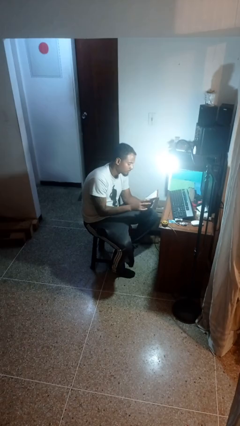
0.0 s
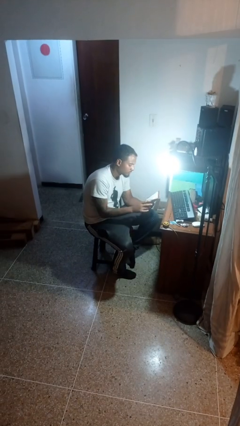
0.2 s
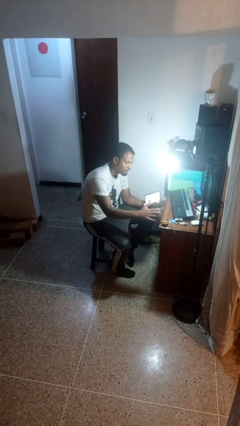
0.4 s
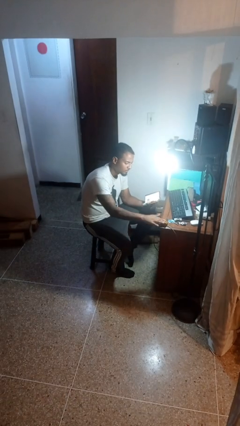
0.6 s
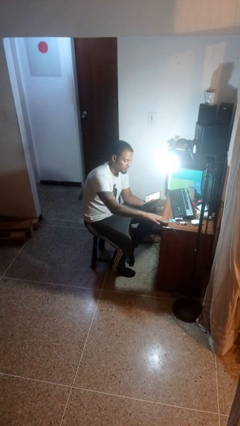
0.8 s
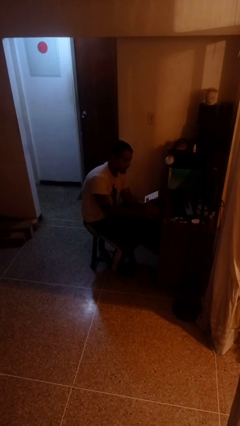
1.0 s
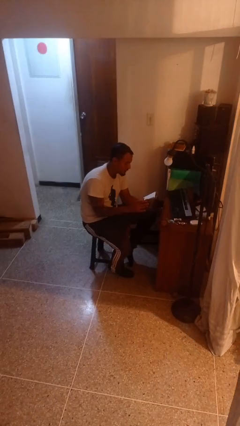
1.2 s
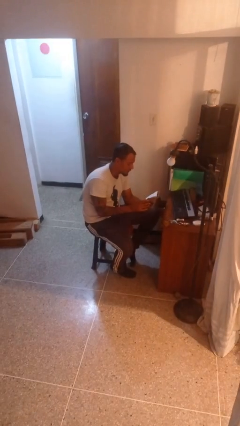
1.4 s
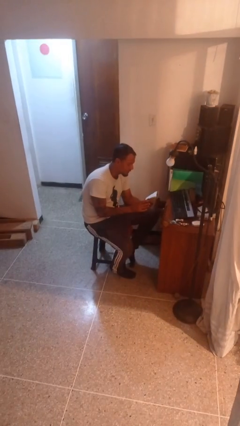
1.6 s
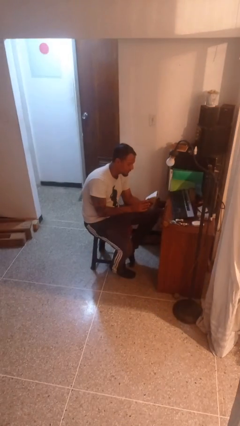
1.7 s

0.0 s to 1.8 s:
person turns off lamp

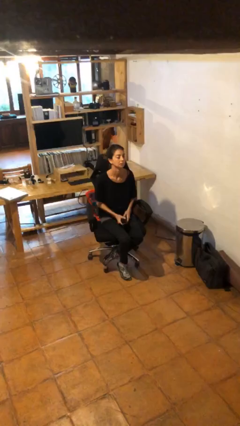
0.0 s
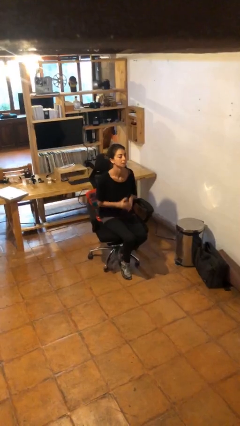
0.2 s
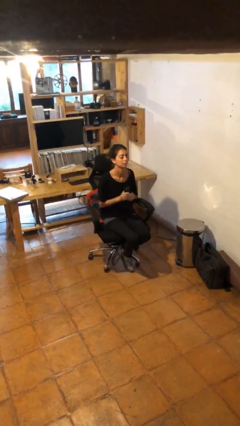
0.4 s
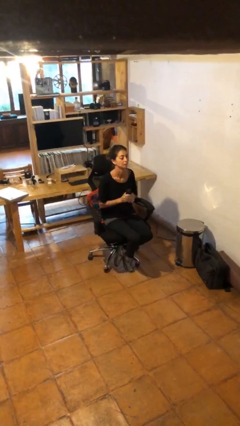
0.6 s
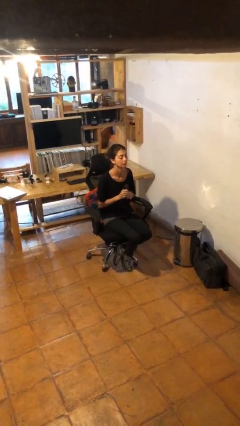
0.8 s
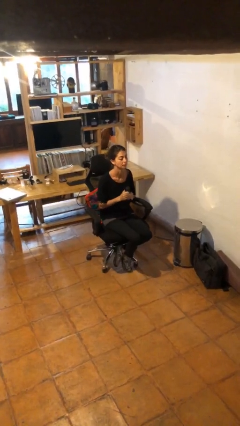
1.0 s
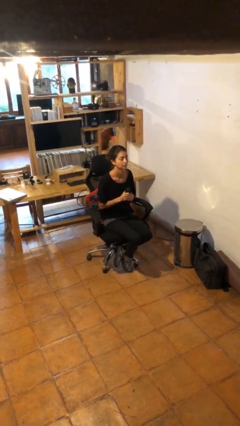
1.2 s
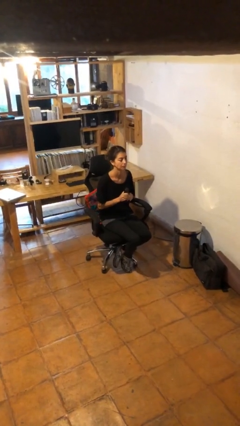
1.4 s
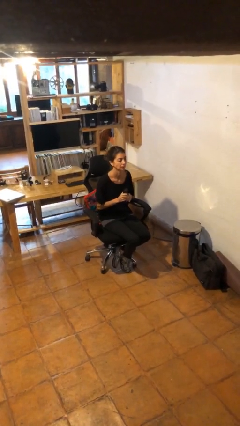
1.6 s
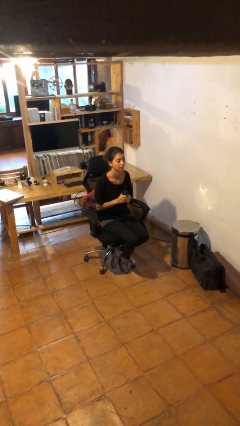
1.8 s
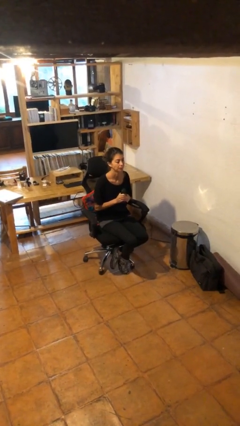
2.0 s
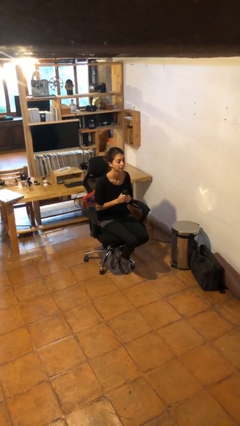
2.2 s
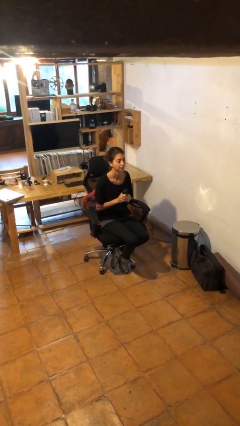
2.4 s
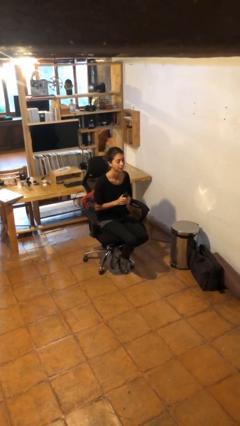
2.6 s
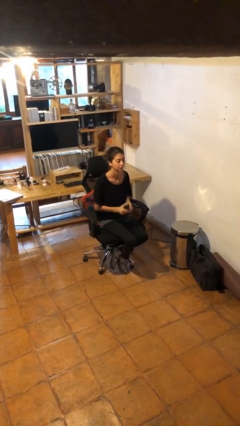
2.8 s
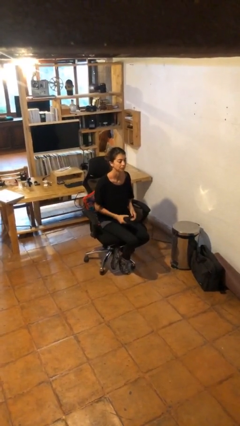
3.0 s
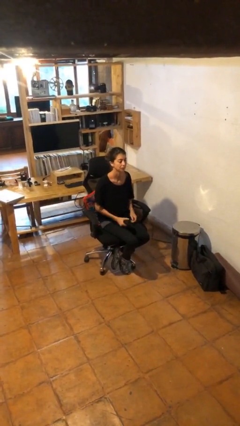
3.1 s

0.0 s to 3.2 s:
person squeezes object

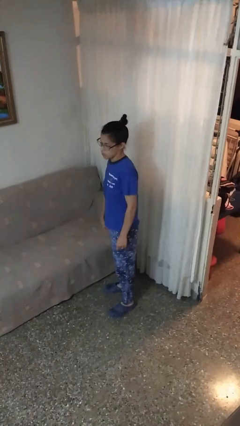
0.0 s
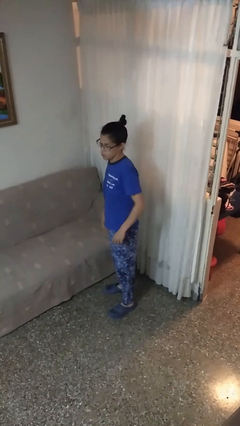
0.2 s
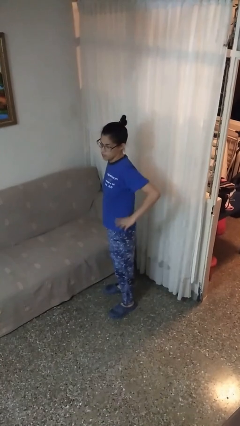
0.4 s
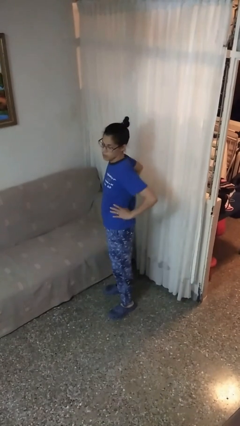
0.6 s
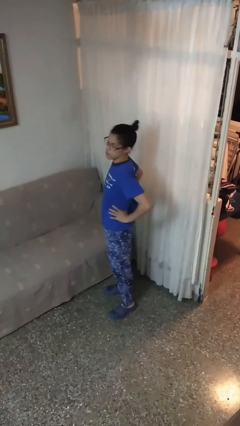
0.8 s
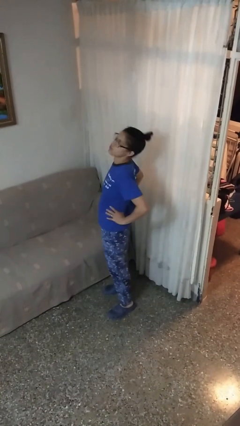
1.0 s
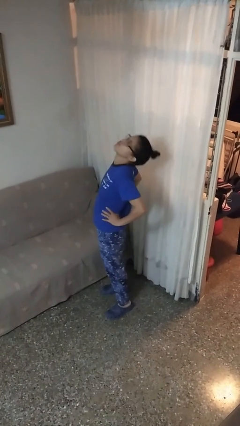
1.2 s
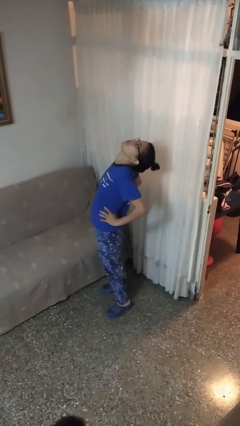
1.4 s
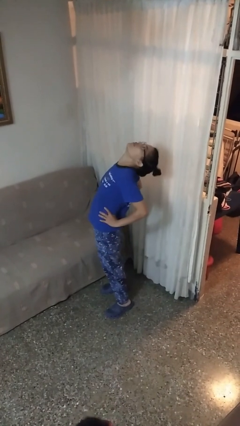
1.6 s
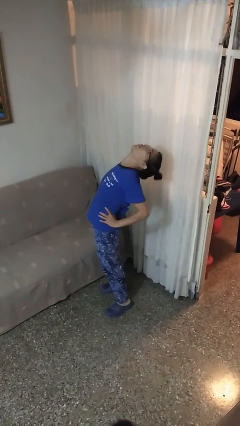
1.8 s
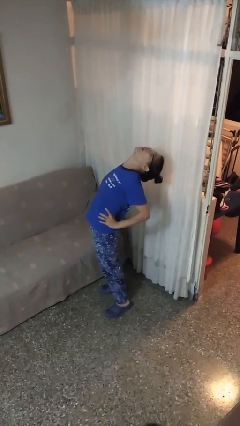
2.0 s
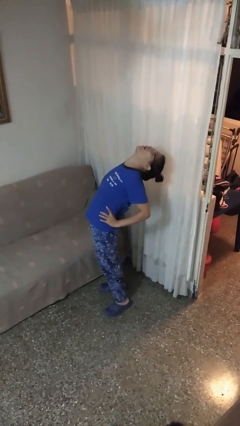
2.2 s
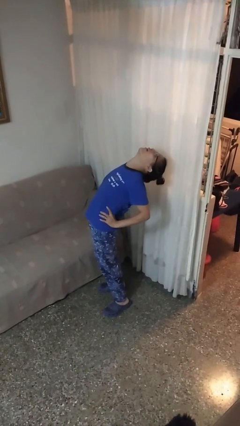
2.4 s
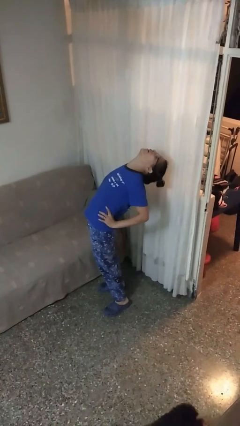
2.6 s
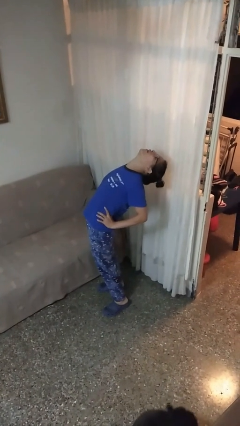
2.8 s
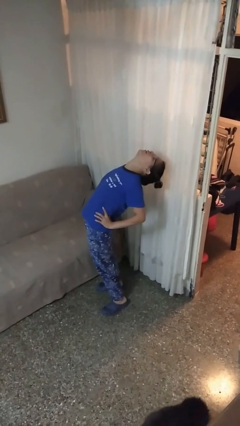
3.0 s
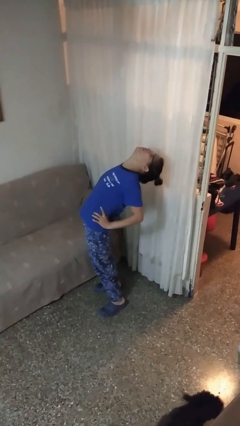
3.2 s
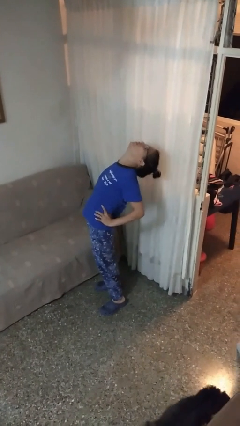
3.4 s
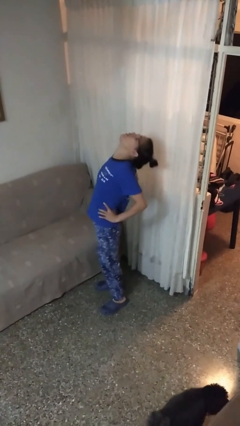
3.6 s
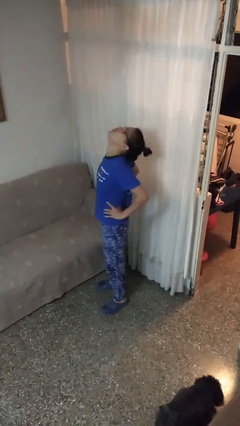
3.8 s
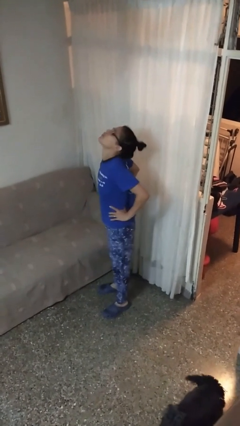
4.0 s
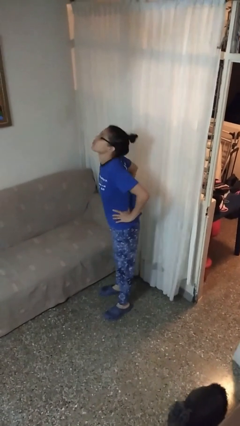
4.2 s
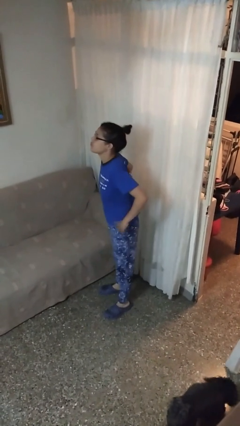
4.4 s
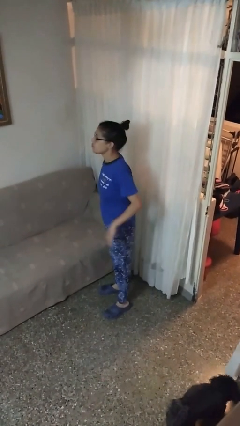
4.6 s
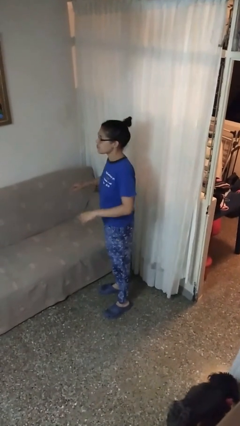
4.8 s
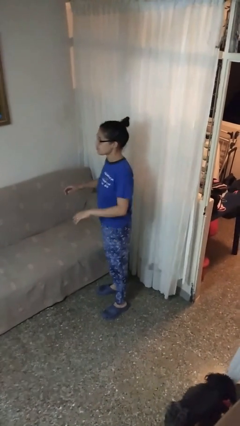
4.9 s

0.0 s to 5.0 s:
person stretches back

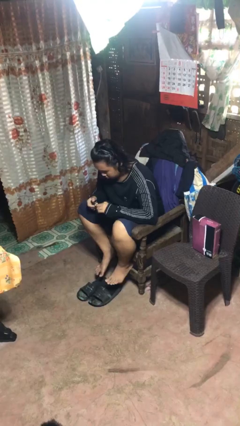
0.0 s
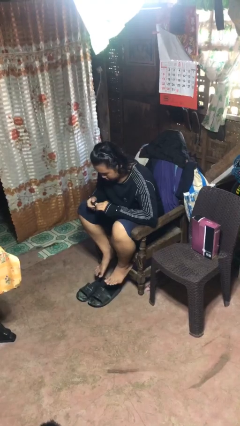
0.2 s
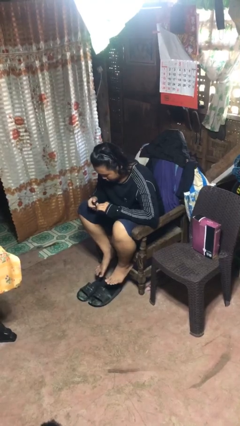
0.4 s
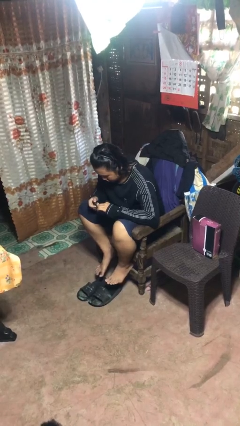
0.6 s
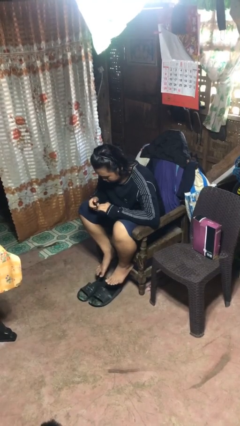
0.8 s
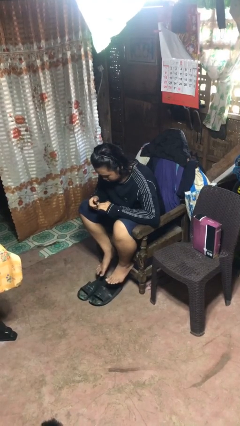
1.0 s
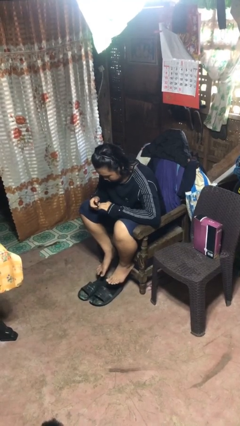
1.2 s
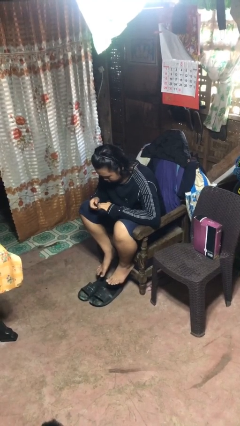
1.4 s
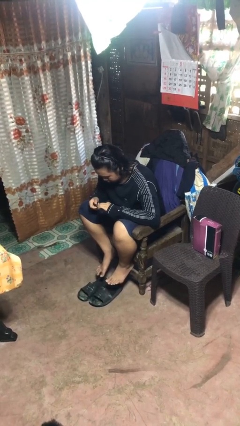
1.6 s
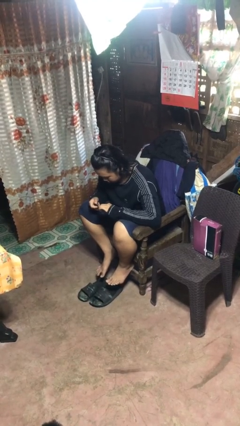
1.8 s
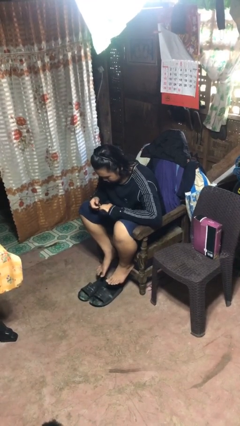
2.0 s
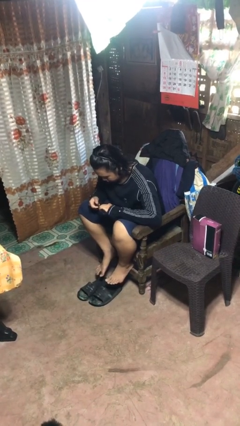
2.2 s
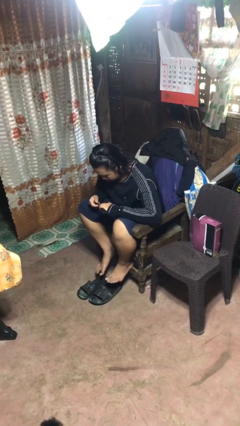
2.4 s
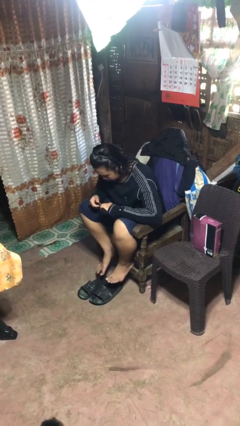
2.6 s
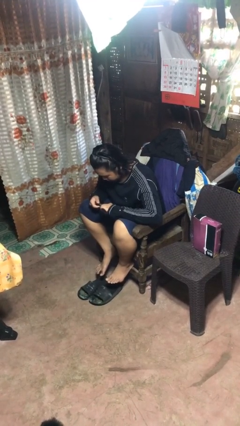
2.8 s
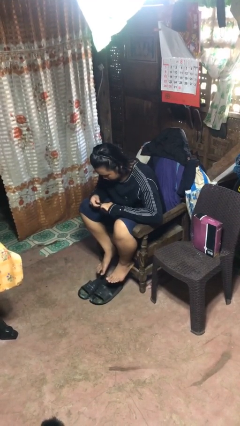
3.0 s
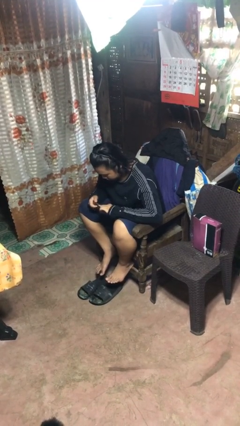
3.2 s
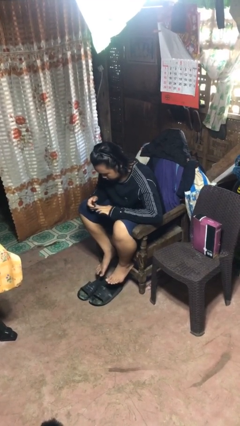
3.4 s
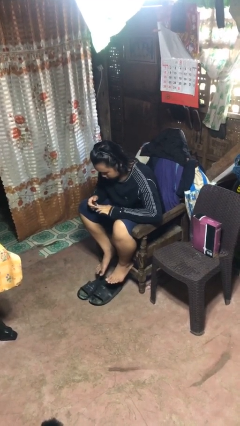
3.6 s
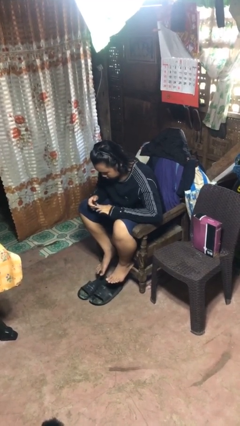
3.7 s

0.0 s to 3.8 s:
person clips fingernails

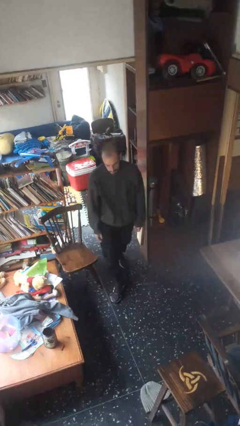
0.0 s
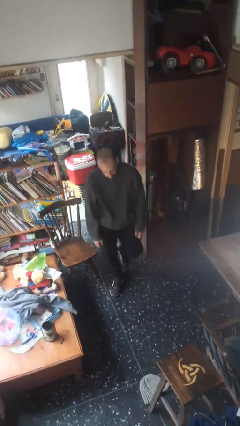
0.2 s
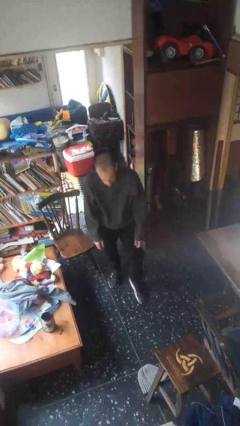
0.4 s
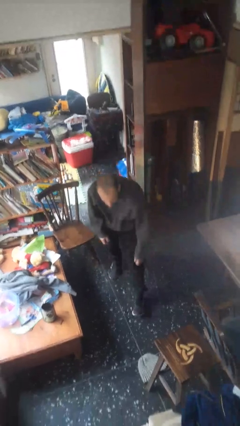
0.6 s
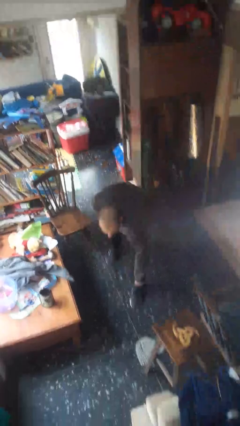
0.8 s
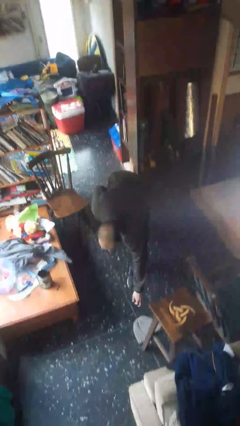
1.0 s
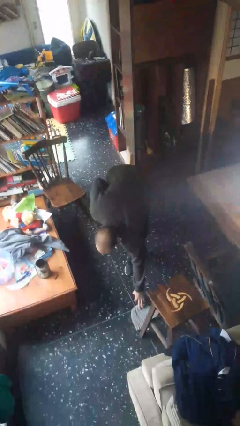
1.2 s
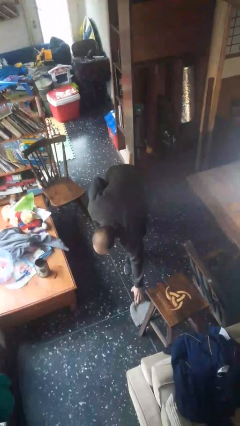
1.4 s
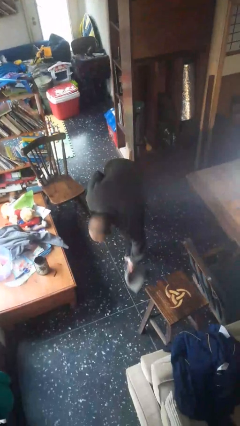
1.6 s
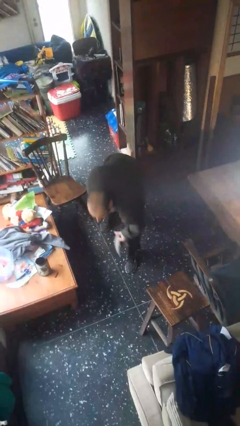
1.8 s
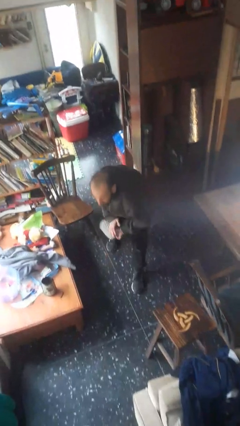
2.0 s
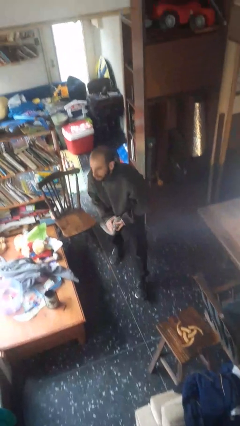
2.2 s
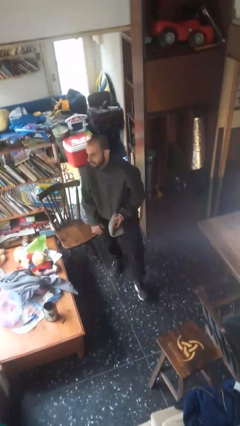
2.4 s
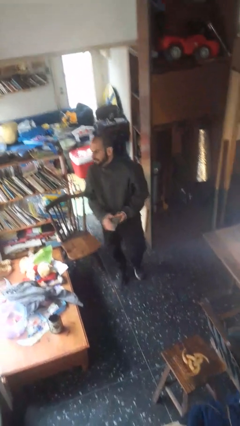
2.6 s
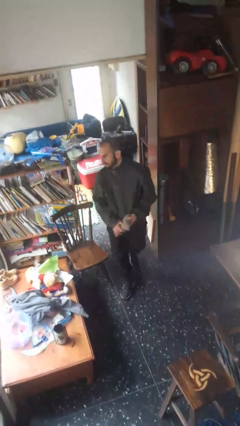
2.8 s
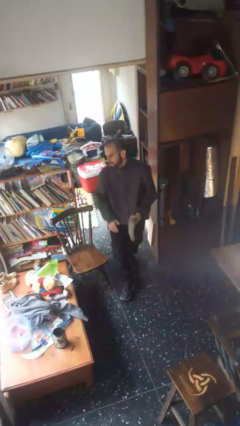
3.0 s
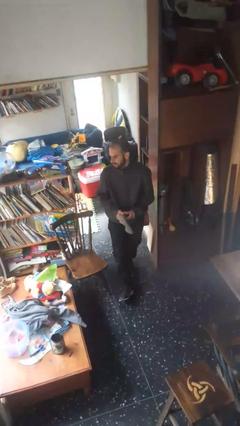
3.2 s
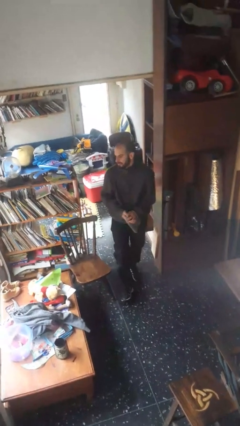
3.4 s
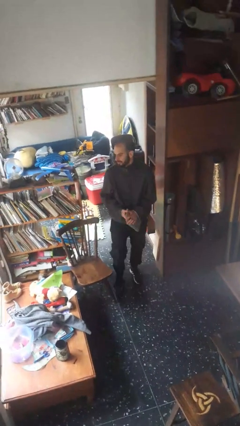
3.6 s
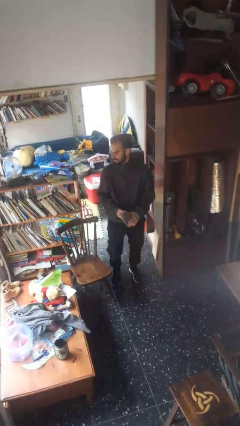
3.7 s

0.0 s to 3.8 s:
person picks up object from floor
